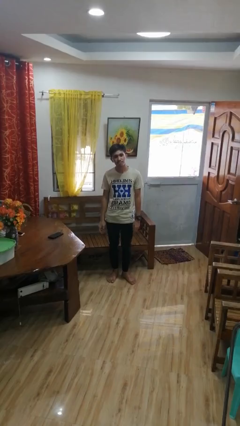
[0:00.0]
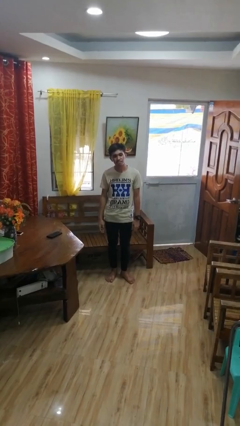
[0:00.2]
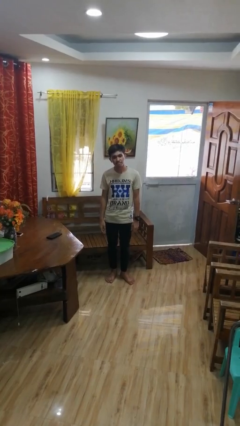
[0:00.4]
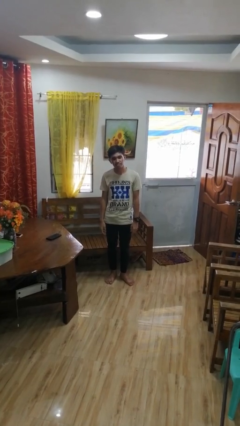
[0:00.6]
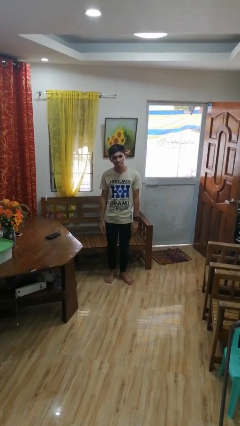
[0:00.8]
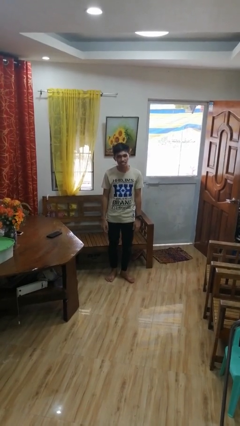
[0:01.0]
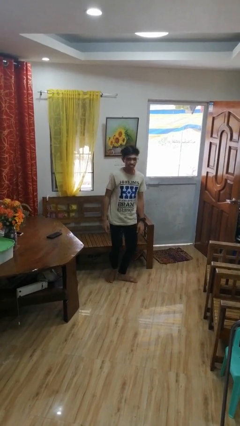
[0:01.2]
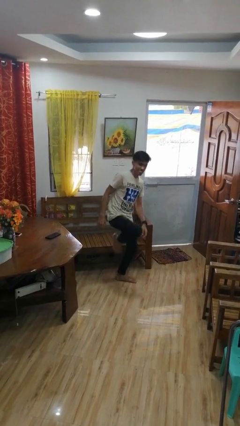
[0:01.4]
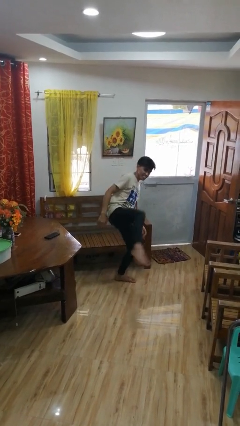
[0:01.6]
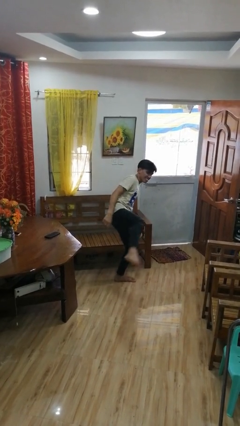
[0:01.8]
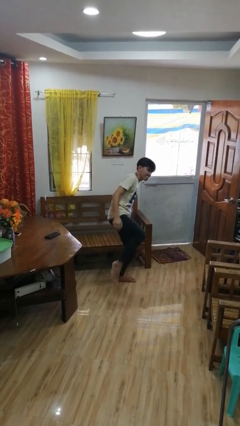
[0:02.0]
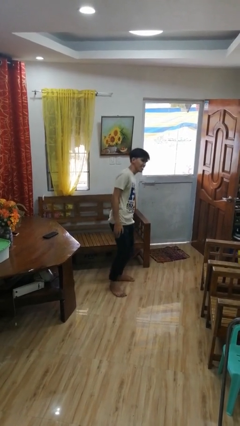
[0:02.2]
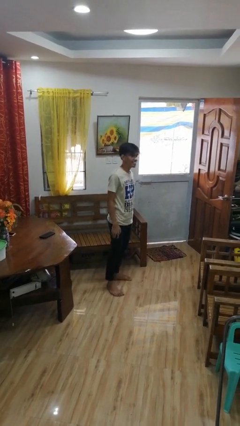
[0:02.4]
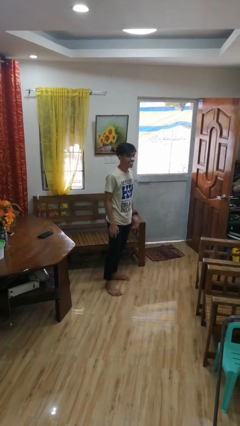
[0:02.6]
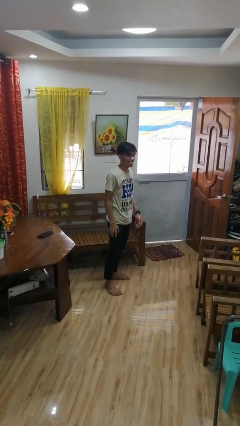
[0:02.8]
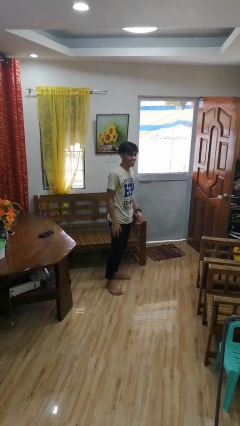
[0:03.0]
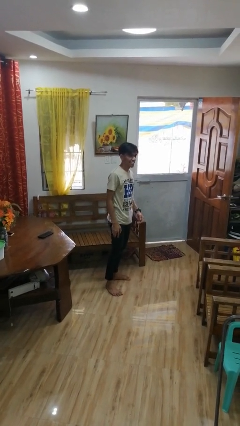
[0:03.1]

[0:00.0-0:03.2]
person karate kicks

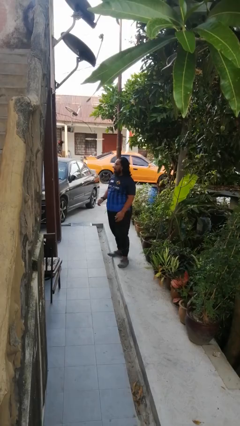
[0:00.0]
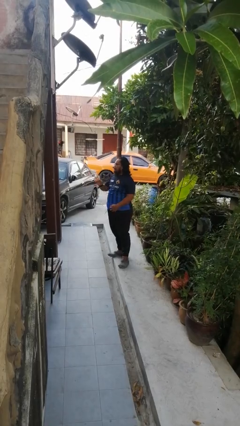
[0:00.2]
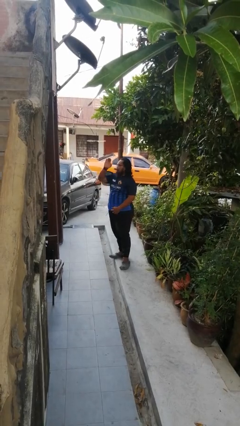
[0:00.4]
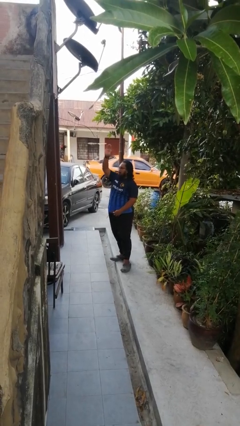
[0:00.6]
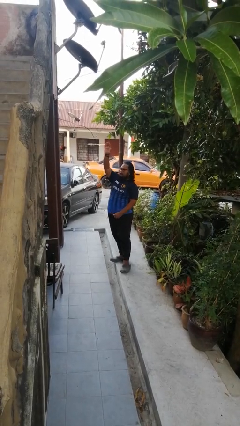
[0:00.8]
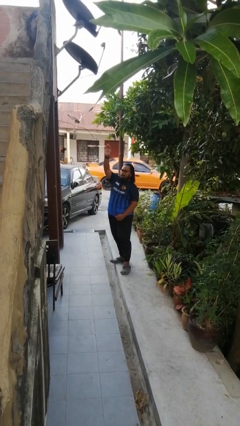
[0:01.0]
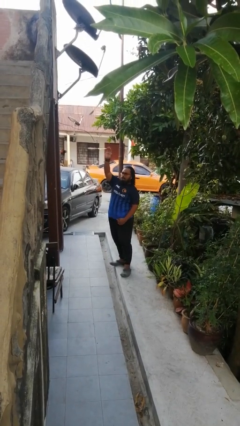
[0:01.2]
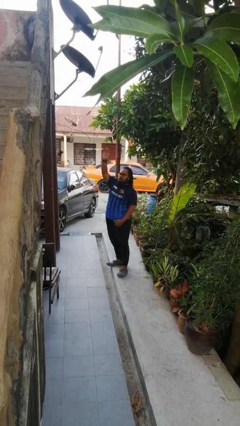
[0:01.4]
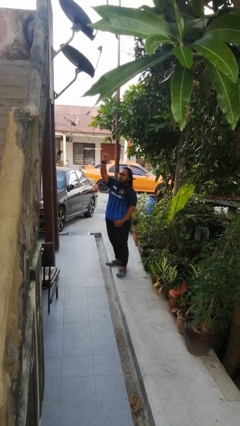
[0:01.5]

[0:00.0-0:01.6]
person gestures raise hand

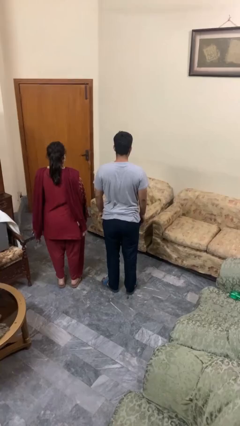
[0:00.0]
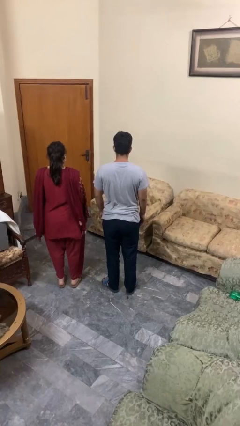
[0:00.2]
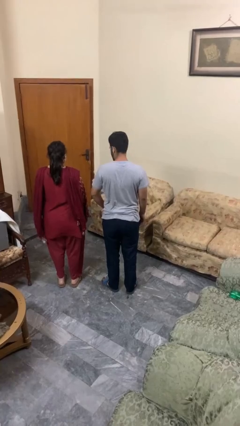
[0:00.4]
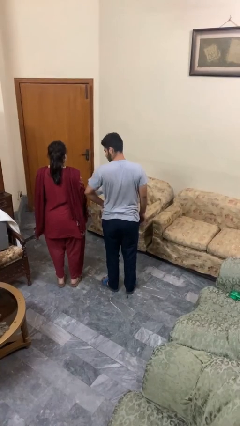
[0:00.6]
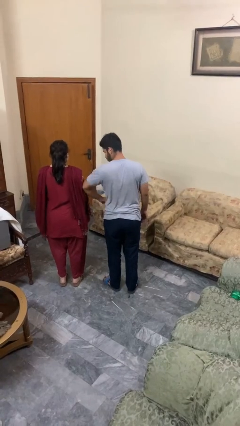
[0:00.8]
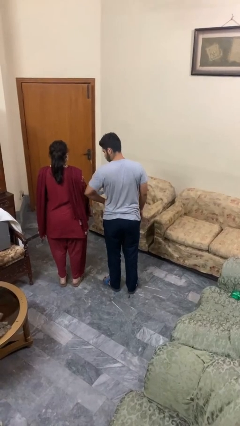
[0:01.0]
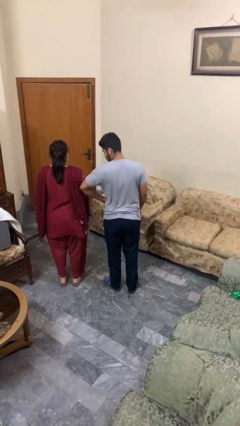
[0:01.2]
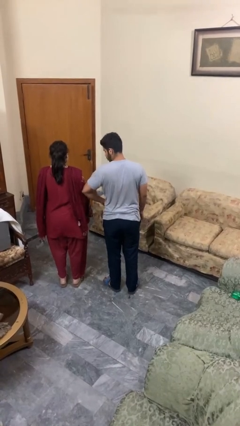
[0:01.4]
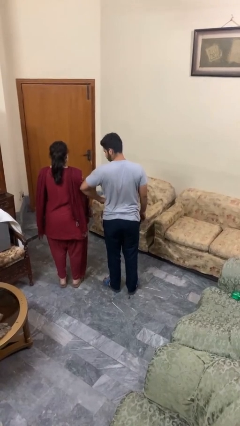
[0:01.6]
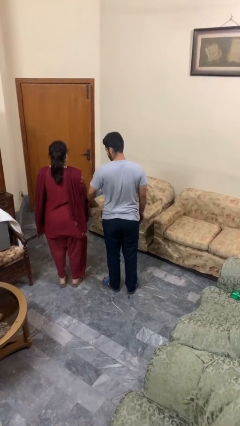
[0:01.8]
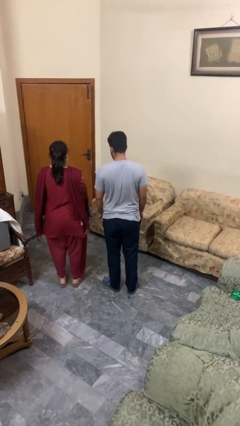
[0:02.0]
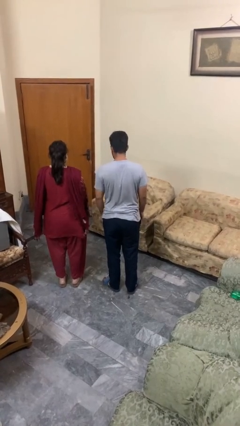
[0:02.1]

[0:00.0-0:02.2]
person nudges person with elbow

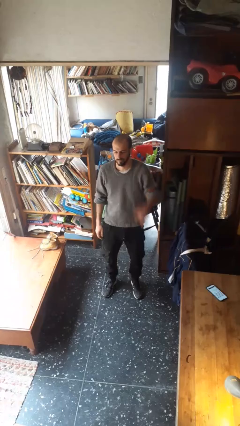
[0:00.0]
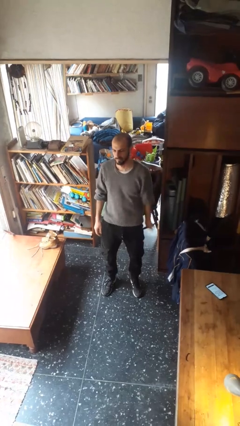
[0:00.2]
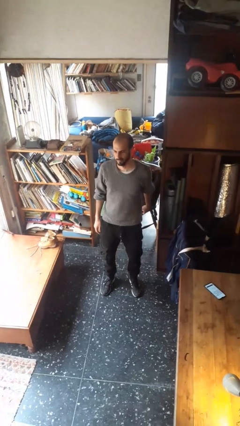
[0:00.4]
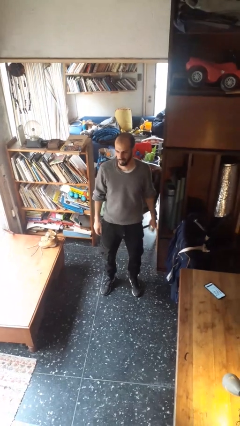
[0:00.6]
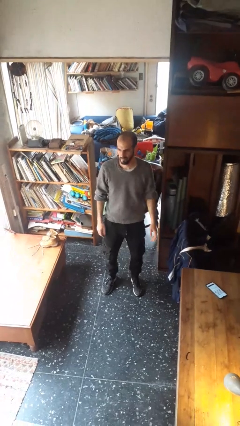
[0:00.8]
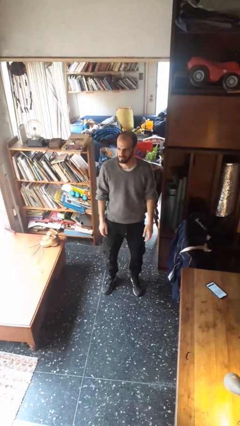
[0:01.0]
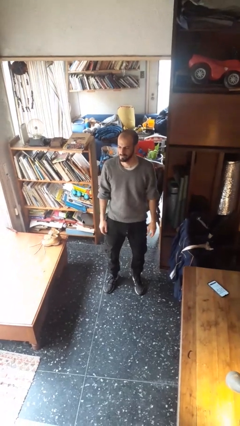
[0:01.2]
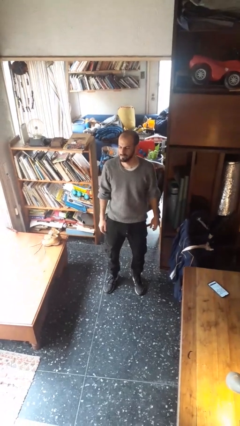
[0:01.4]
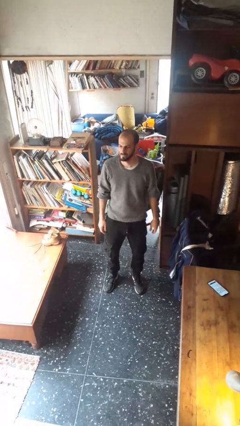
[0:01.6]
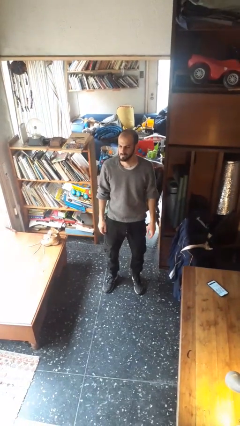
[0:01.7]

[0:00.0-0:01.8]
person gestures lower hand

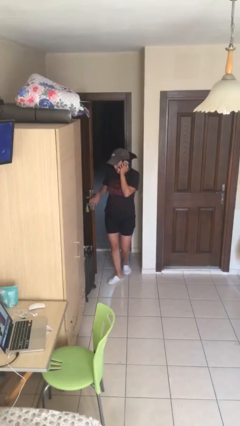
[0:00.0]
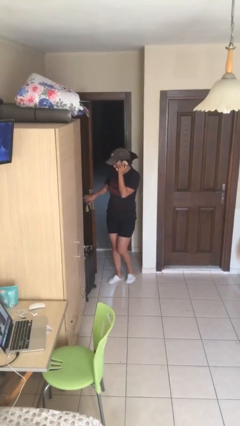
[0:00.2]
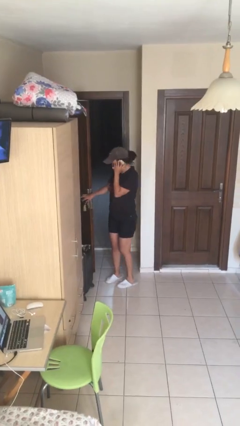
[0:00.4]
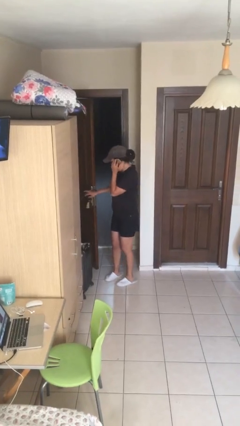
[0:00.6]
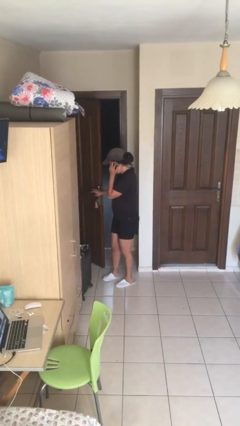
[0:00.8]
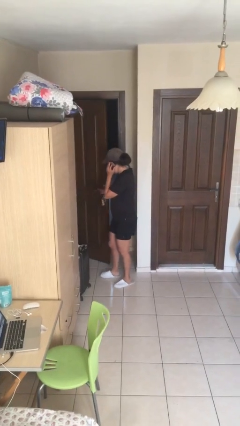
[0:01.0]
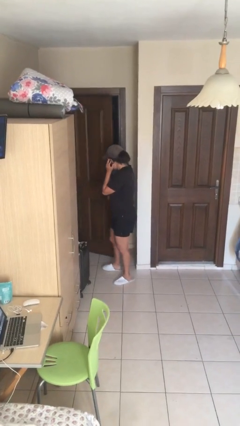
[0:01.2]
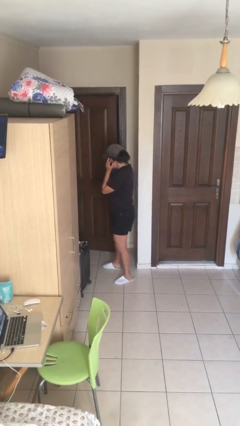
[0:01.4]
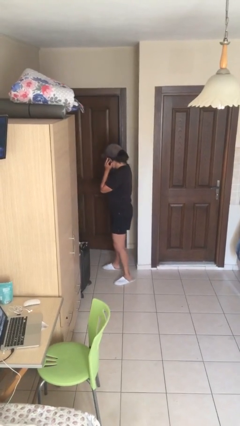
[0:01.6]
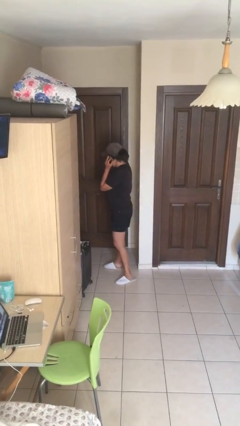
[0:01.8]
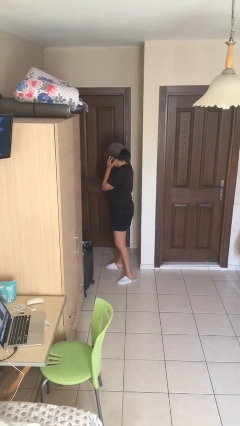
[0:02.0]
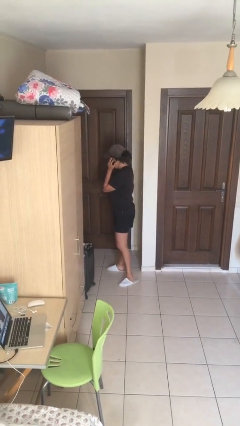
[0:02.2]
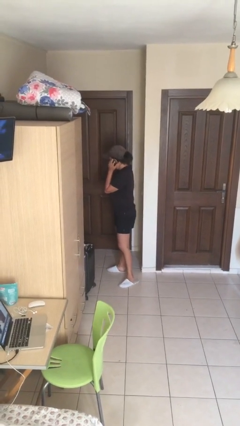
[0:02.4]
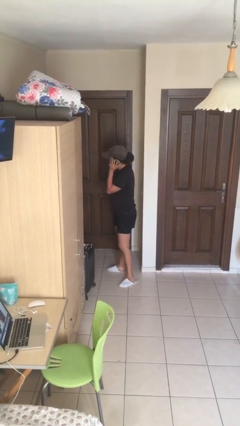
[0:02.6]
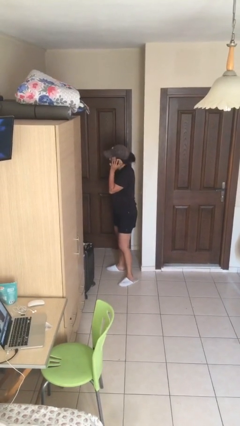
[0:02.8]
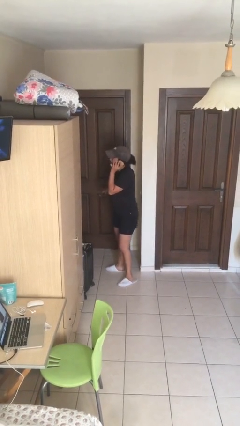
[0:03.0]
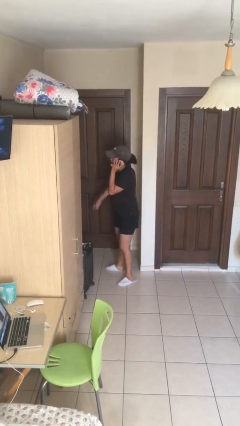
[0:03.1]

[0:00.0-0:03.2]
person closes facility door

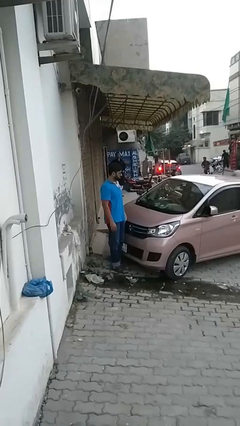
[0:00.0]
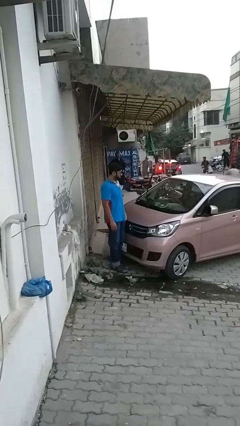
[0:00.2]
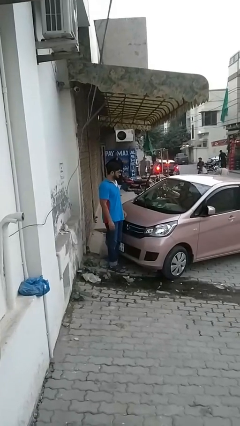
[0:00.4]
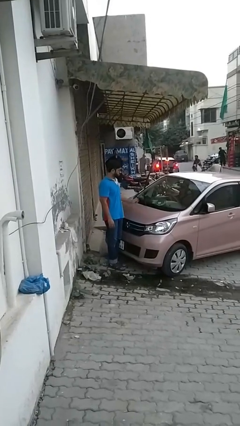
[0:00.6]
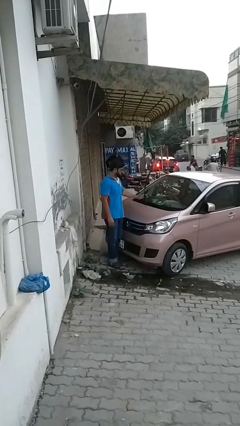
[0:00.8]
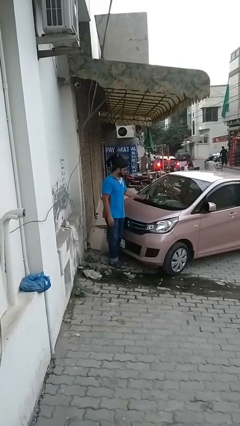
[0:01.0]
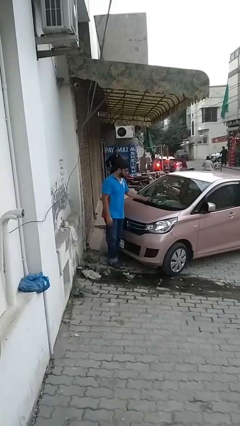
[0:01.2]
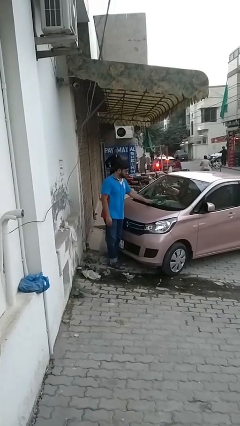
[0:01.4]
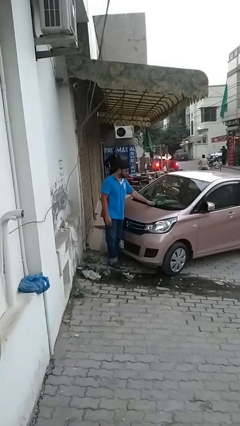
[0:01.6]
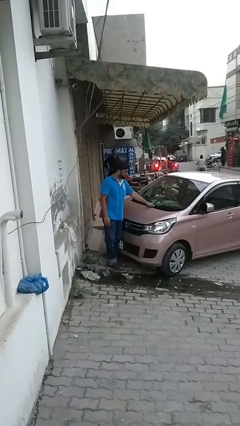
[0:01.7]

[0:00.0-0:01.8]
person flips down car wipers

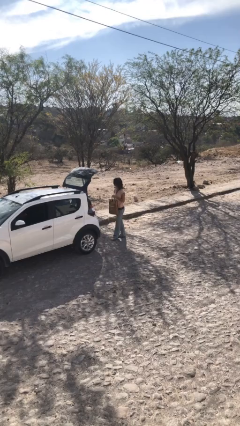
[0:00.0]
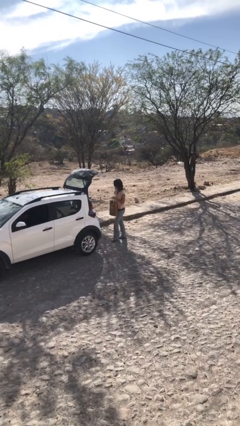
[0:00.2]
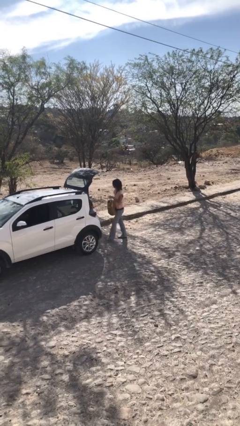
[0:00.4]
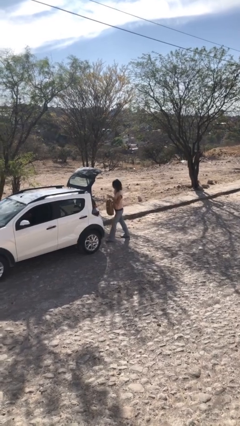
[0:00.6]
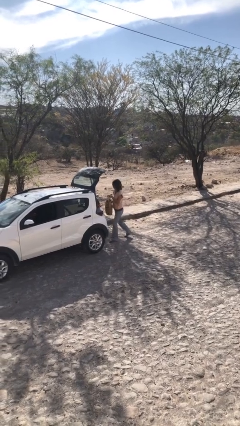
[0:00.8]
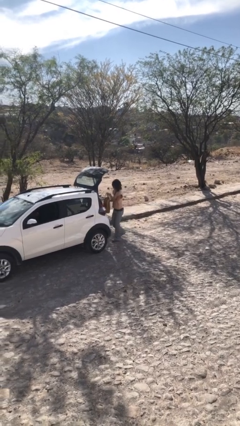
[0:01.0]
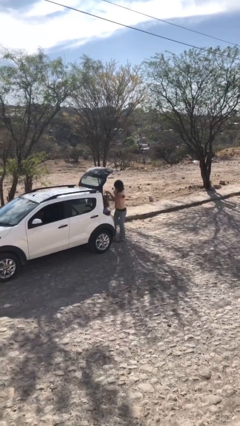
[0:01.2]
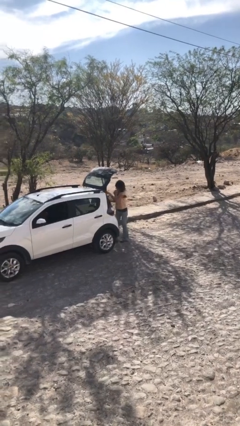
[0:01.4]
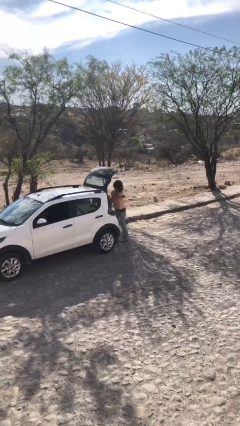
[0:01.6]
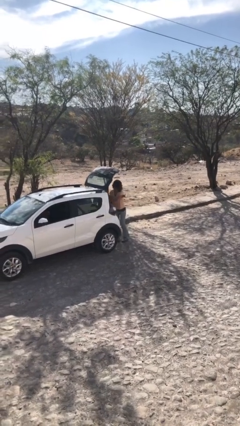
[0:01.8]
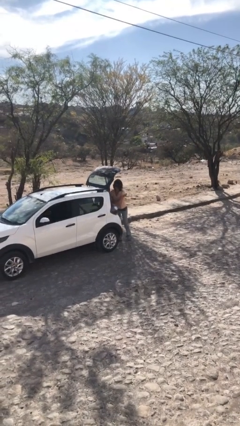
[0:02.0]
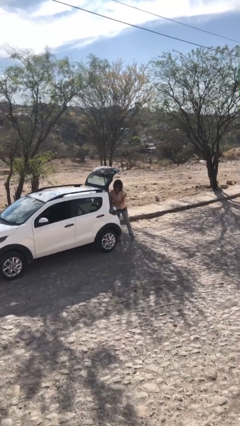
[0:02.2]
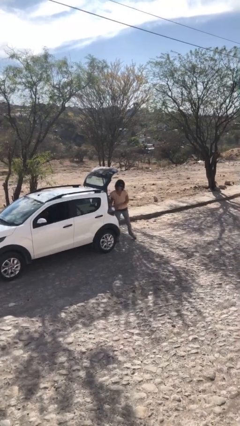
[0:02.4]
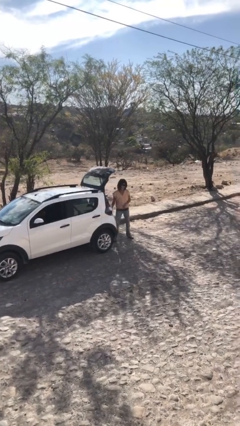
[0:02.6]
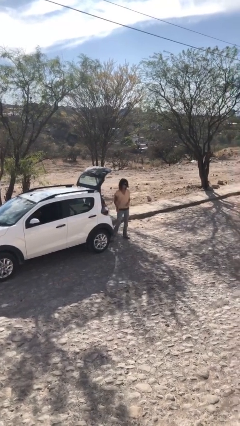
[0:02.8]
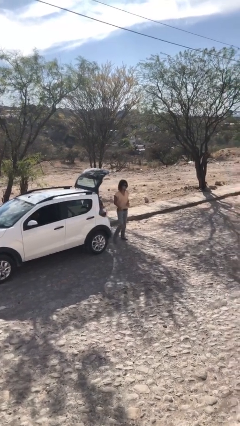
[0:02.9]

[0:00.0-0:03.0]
person loads car
